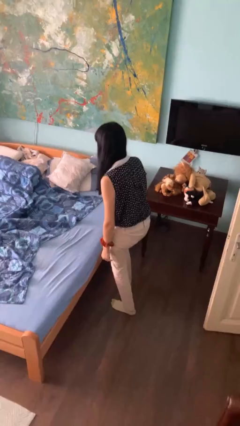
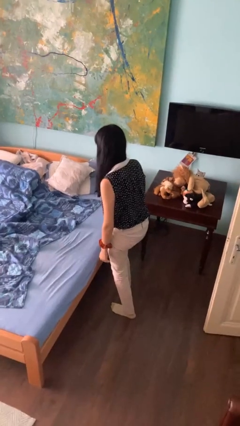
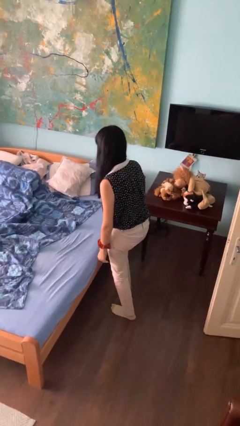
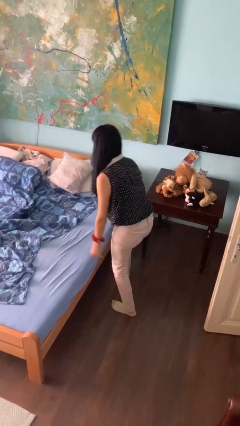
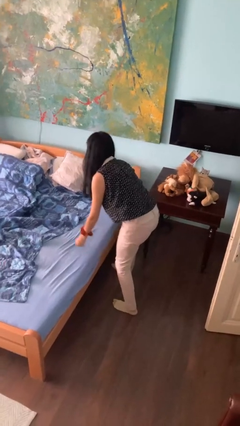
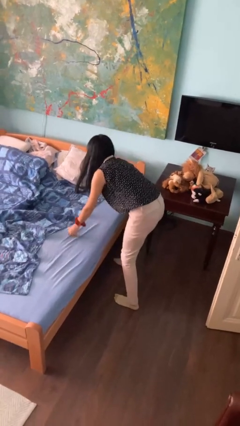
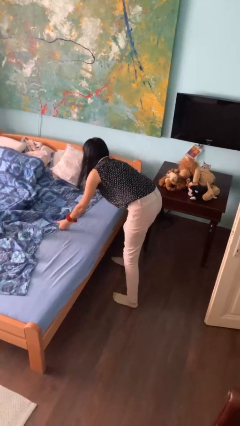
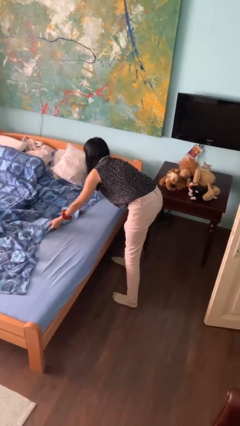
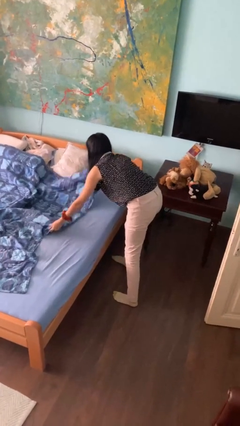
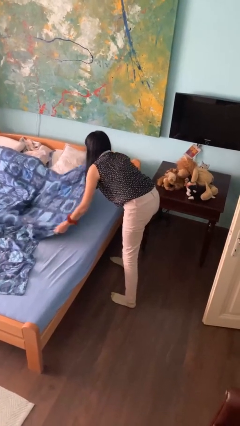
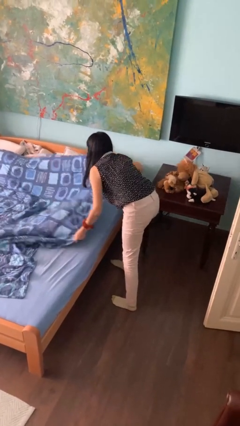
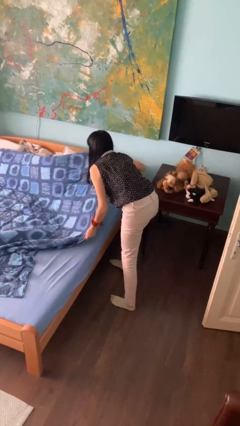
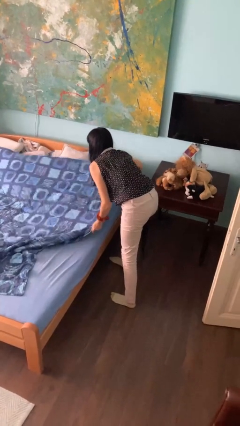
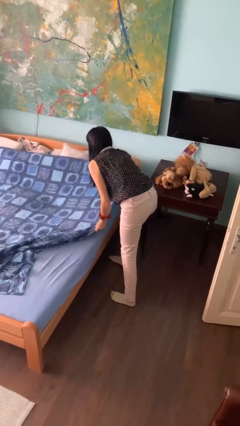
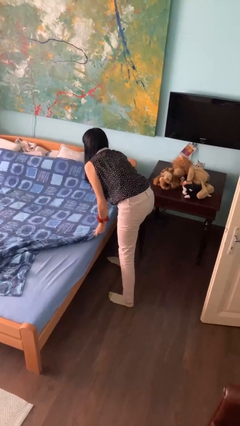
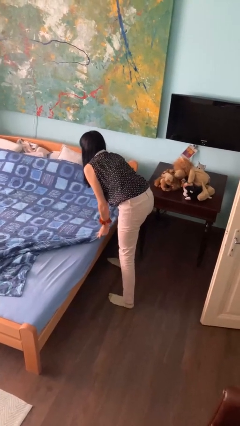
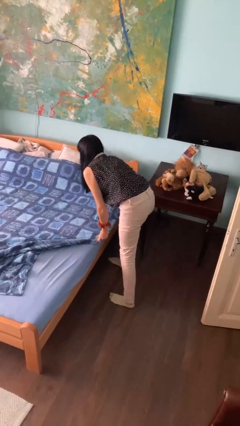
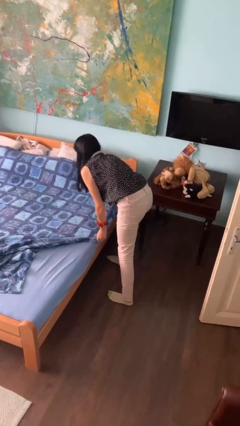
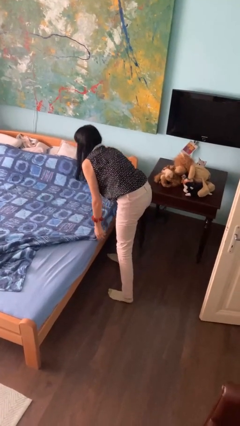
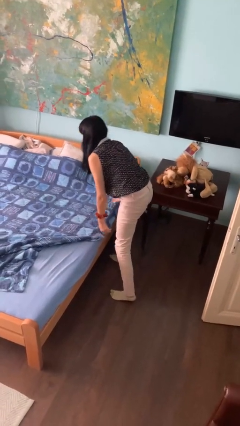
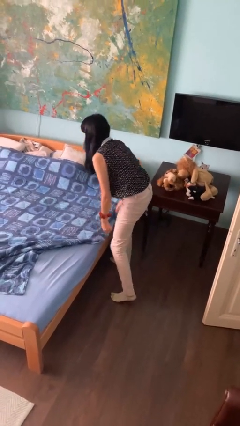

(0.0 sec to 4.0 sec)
person makes bed

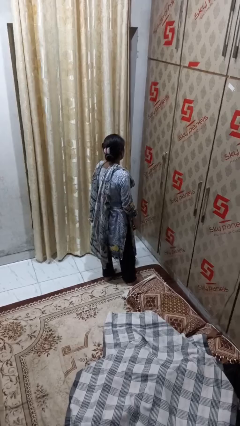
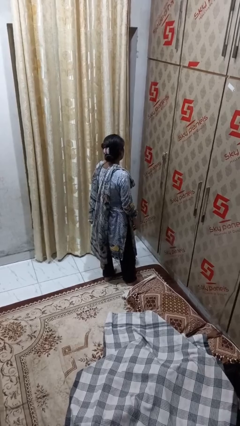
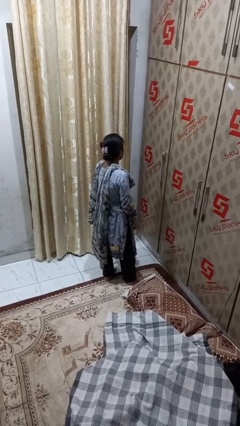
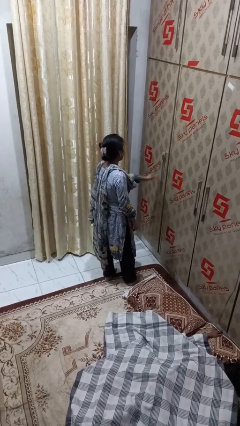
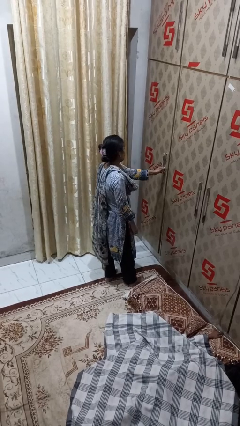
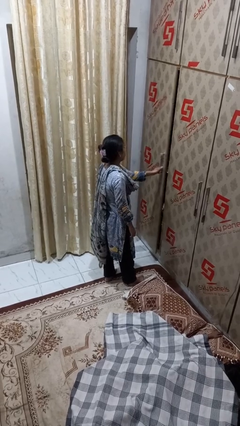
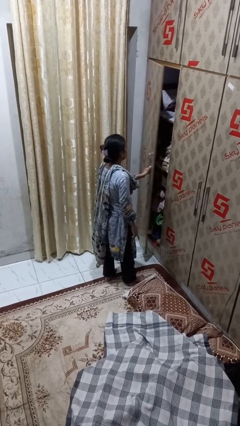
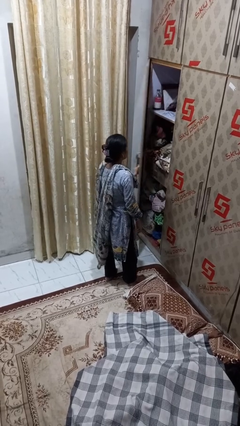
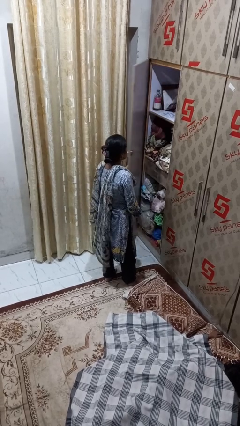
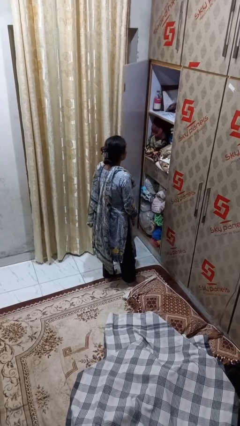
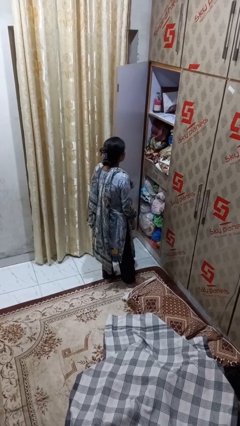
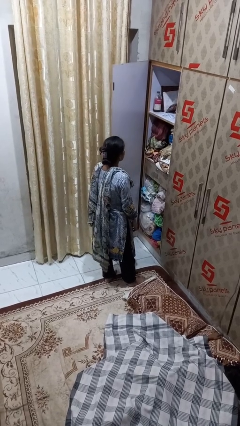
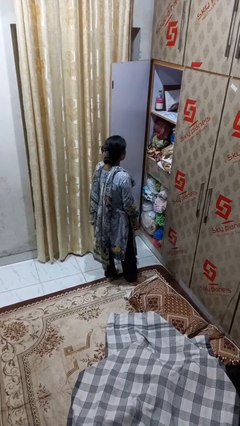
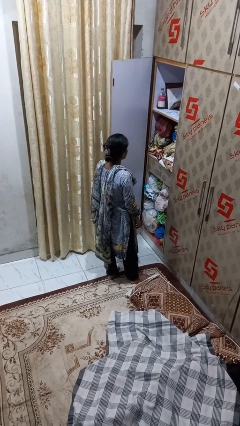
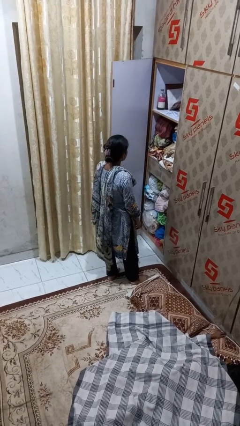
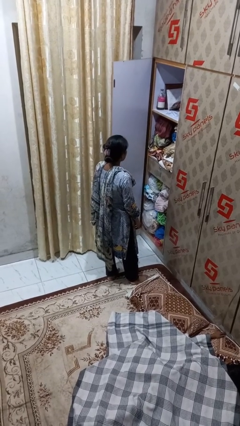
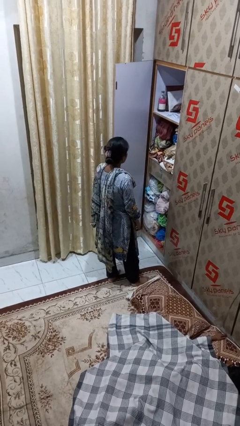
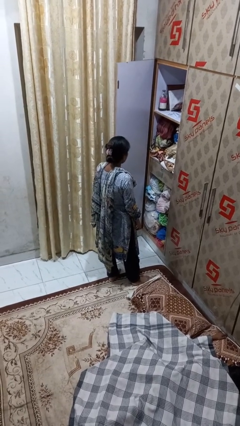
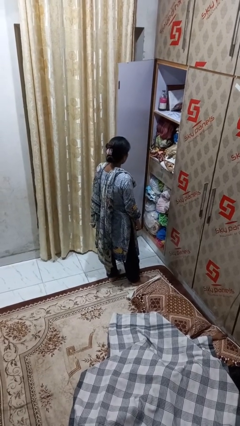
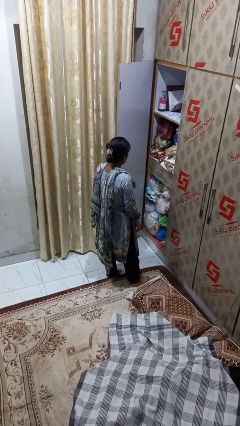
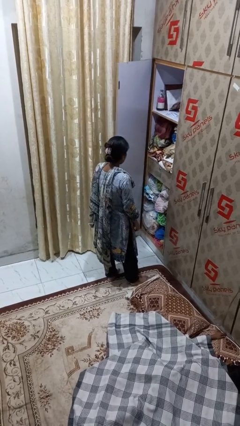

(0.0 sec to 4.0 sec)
person opens closet door

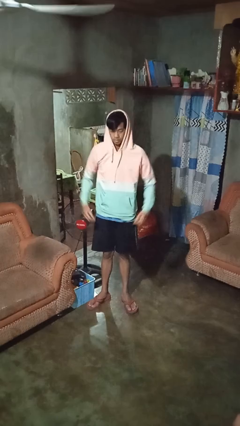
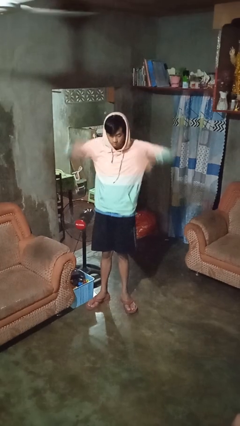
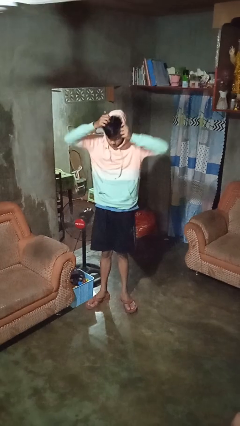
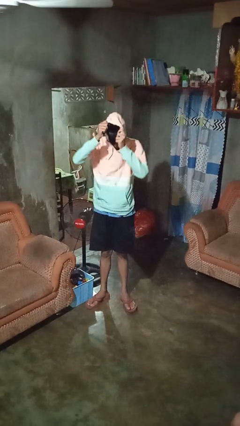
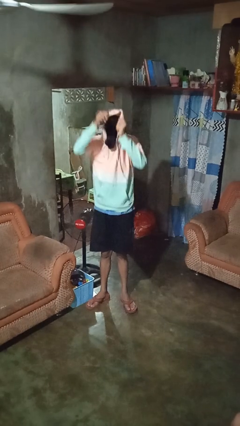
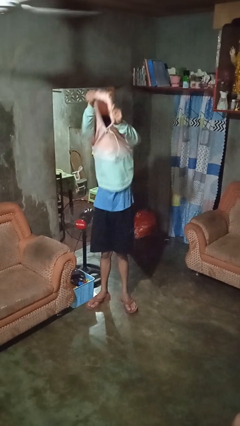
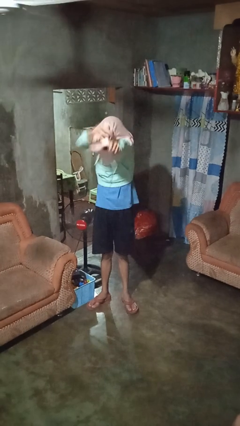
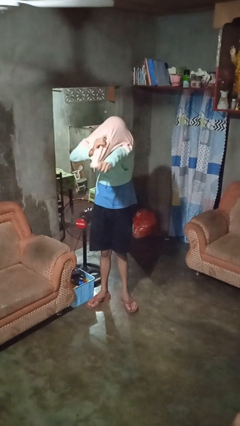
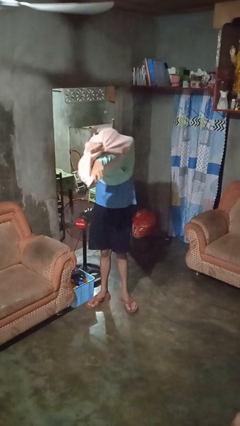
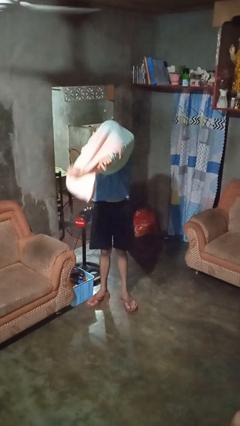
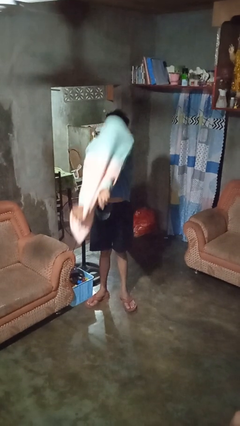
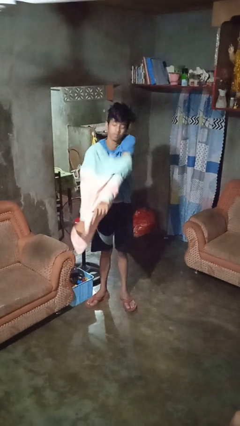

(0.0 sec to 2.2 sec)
person takes off hoodie

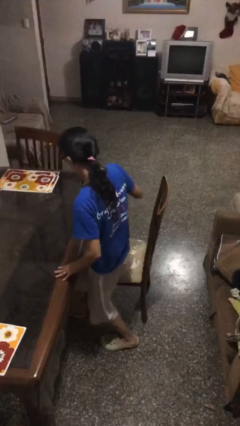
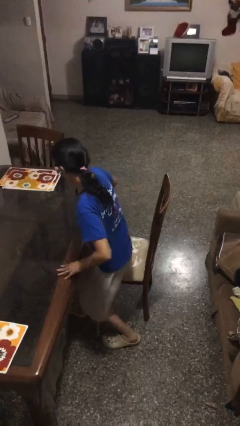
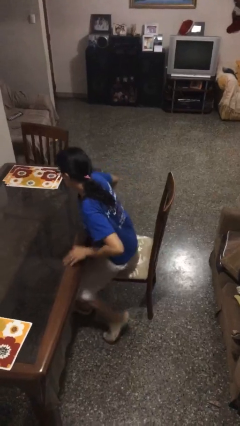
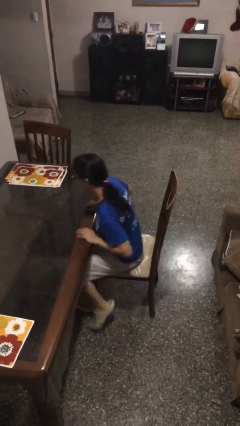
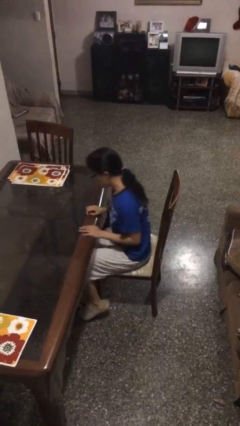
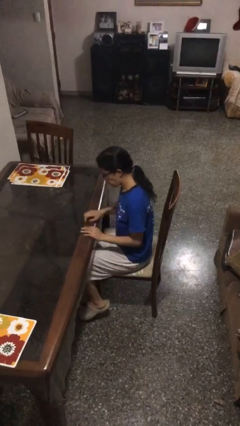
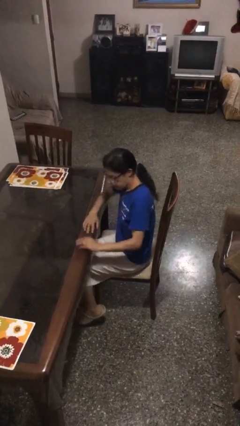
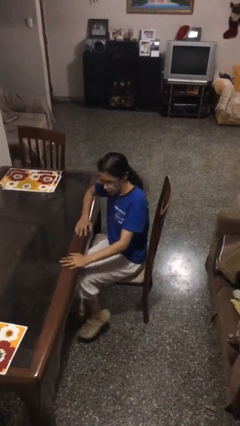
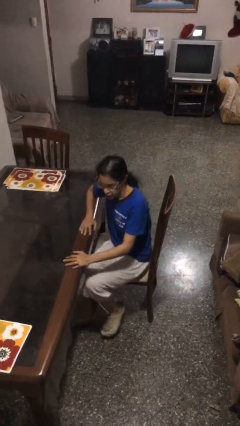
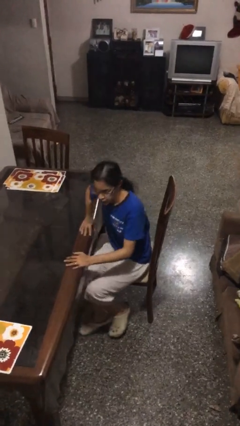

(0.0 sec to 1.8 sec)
person sits down

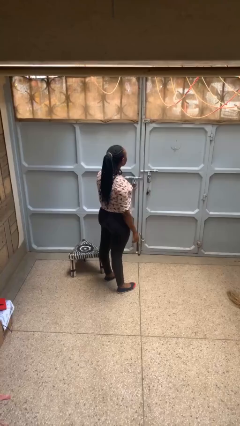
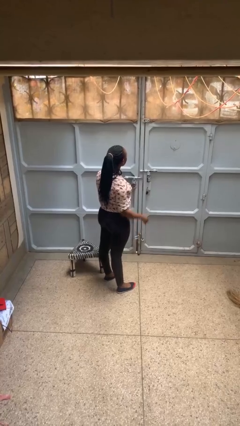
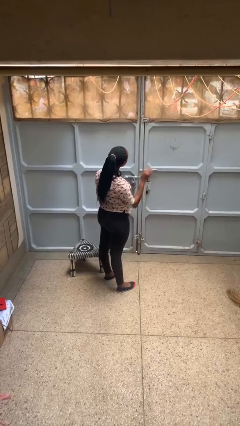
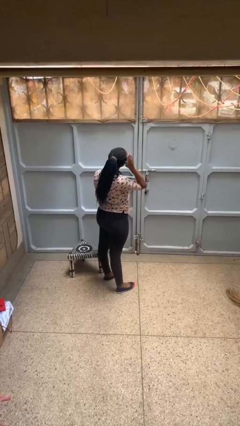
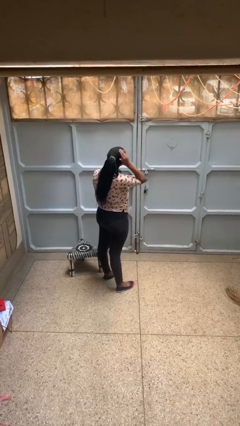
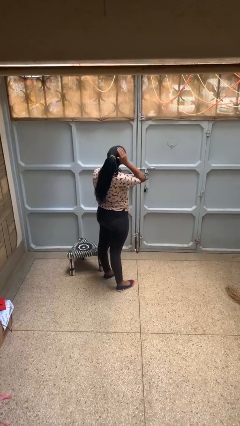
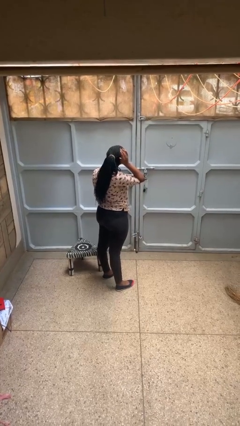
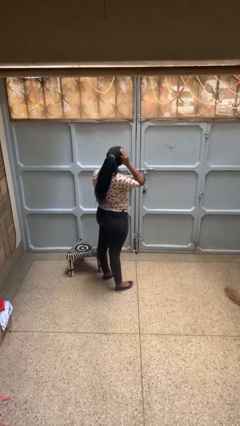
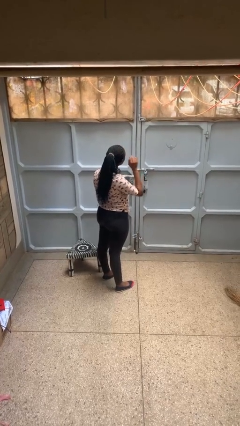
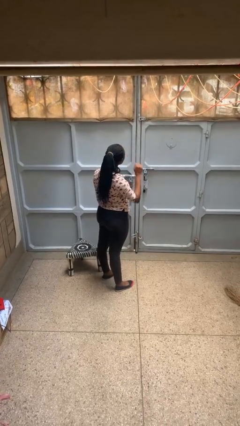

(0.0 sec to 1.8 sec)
person pats head

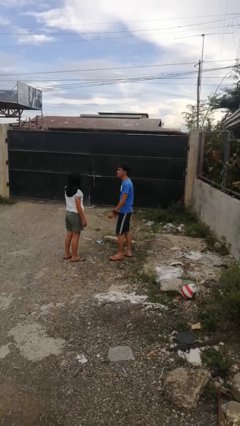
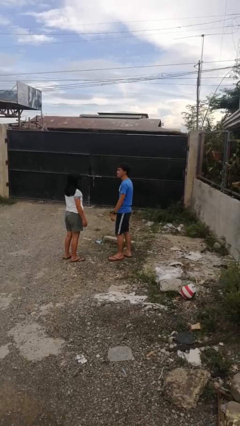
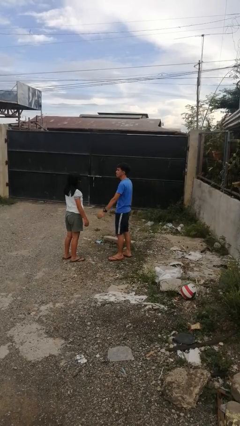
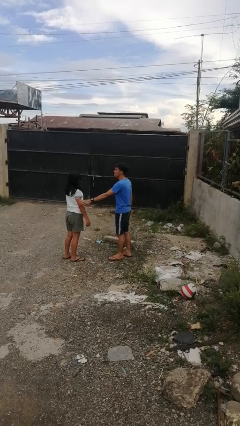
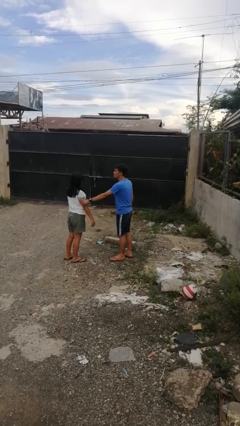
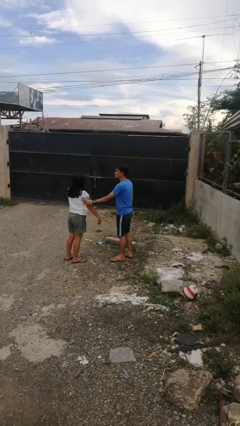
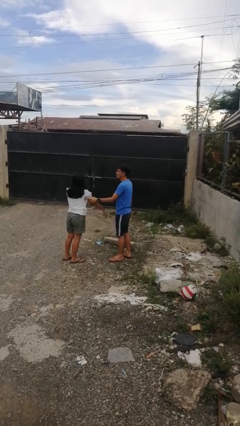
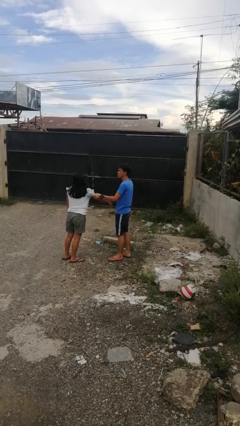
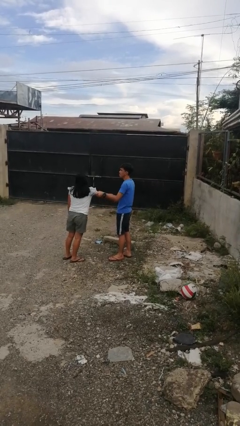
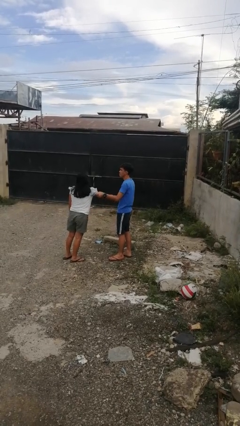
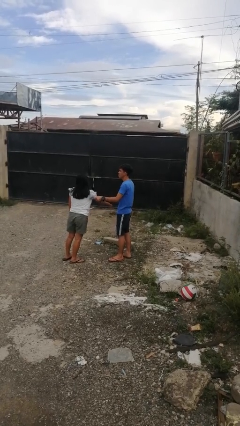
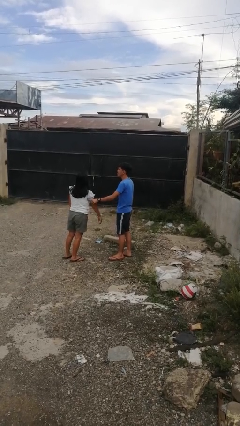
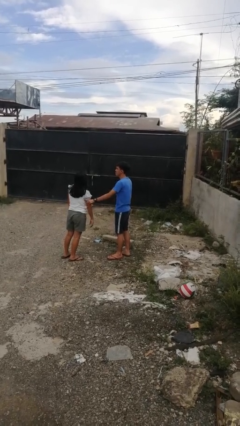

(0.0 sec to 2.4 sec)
person grabs person by bicep

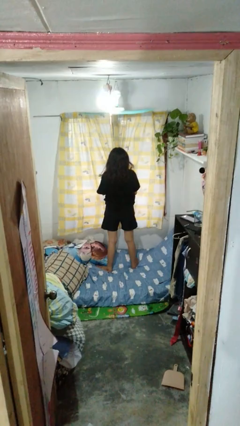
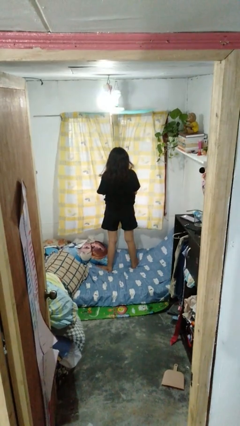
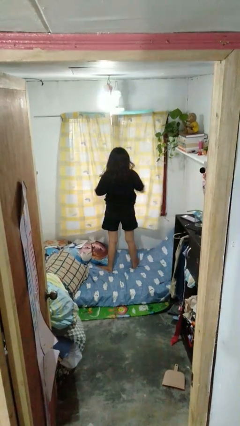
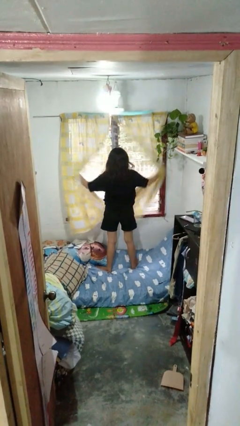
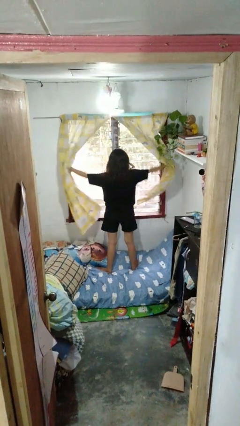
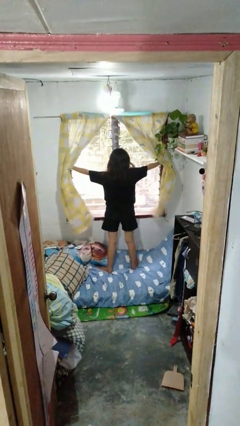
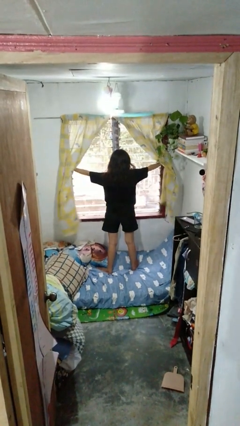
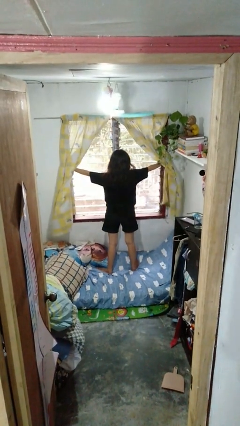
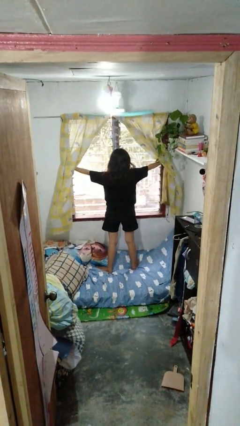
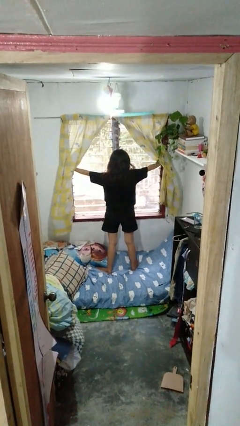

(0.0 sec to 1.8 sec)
person opens curtains
